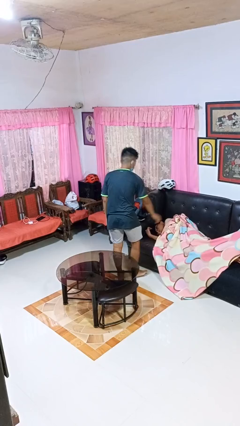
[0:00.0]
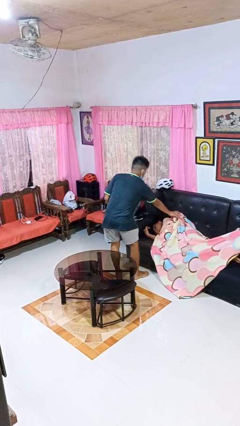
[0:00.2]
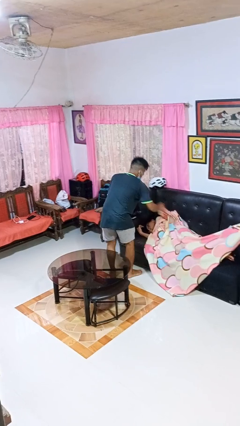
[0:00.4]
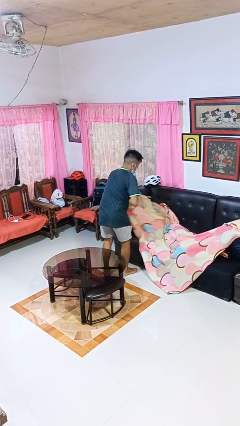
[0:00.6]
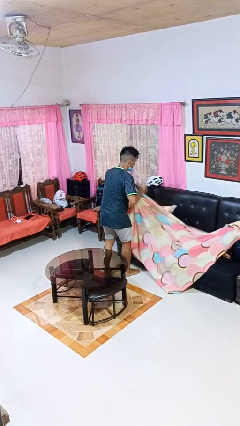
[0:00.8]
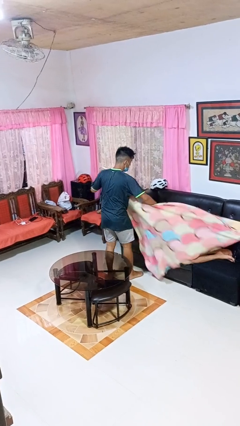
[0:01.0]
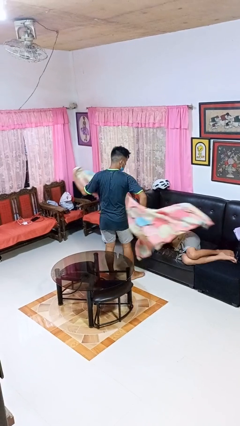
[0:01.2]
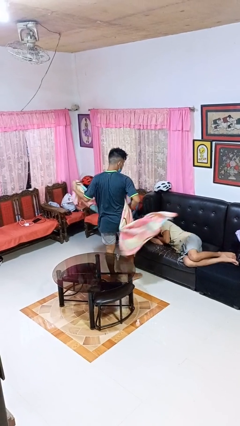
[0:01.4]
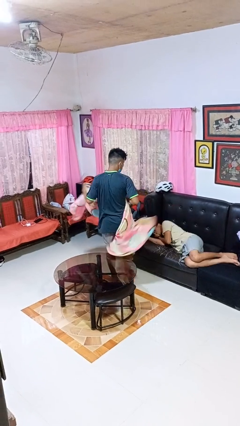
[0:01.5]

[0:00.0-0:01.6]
person uncovers friend with blanket

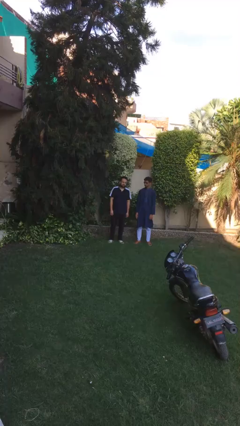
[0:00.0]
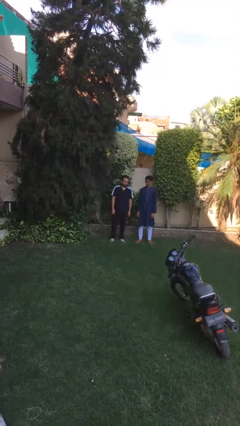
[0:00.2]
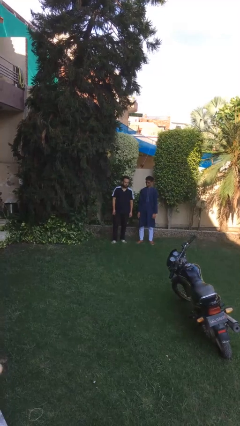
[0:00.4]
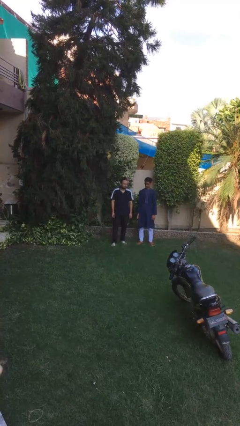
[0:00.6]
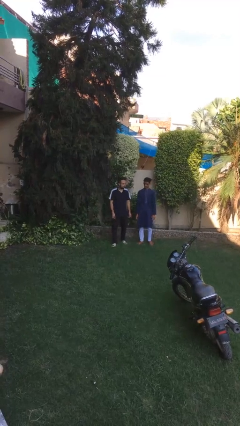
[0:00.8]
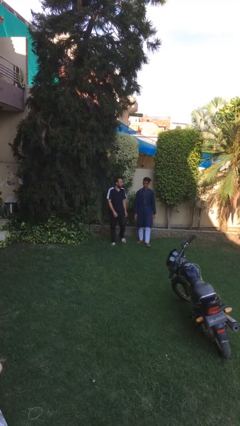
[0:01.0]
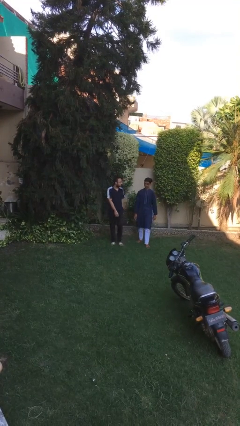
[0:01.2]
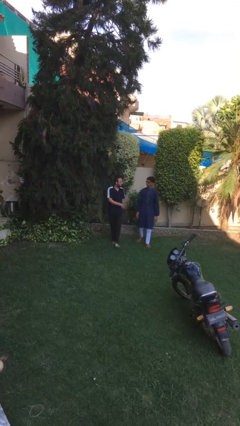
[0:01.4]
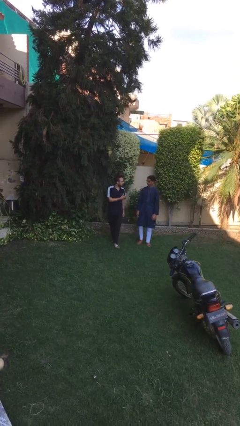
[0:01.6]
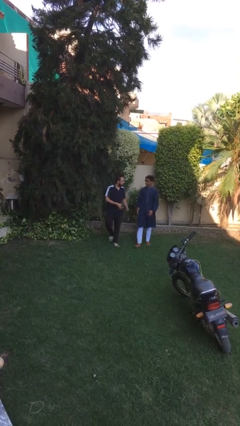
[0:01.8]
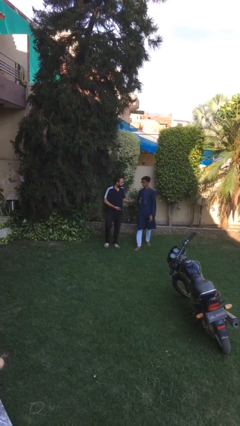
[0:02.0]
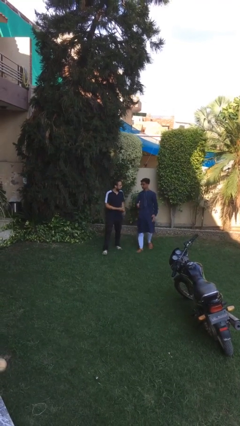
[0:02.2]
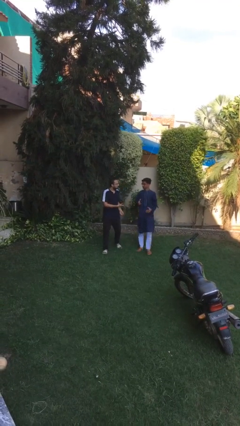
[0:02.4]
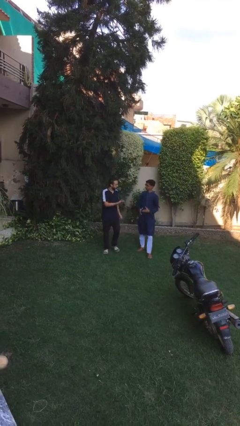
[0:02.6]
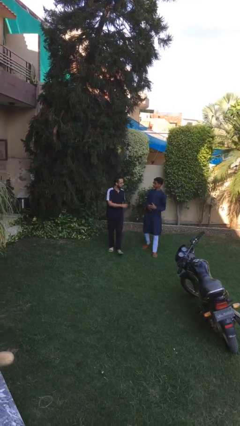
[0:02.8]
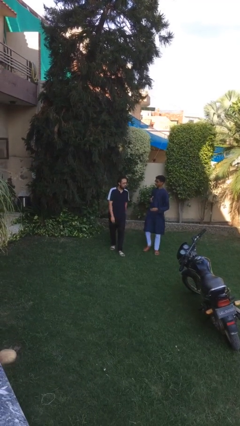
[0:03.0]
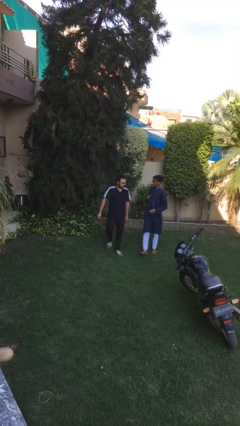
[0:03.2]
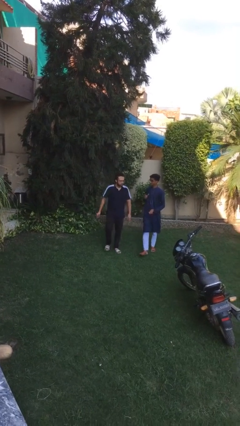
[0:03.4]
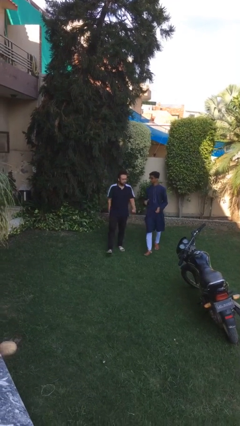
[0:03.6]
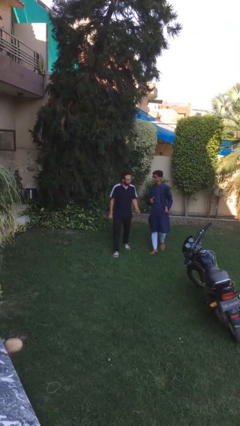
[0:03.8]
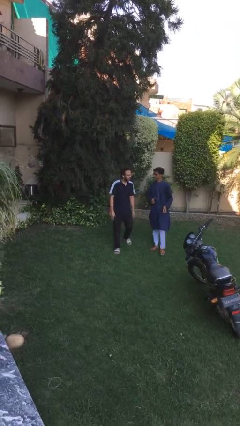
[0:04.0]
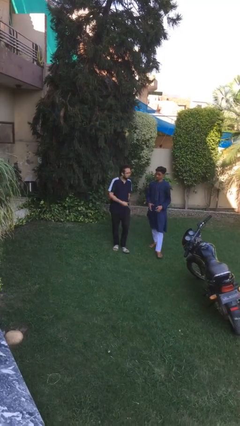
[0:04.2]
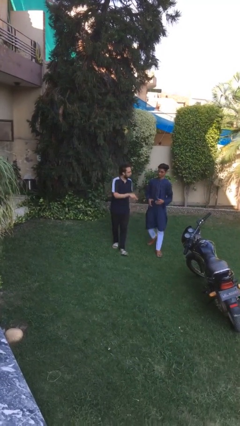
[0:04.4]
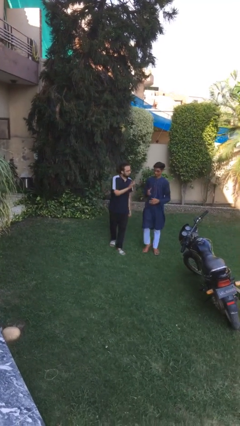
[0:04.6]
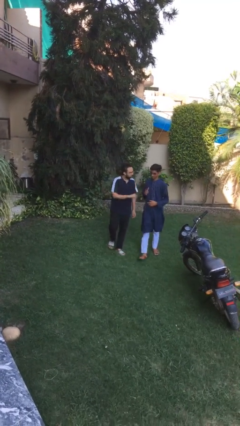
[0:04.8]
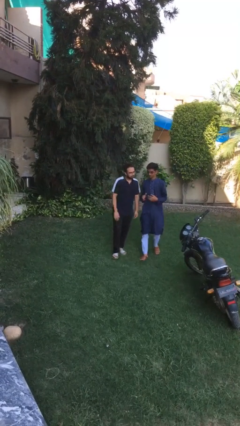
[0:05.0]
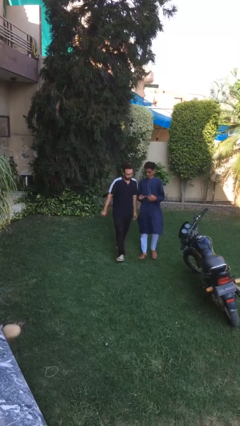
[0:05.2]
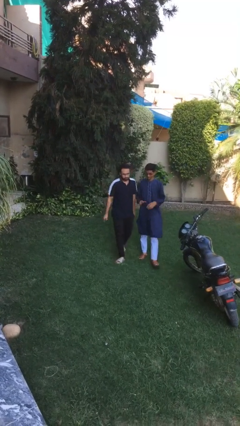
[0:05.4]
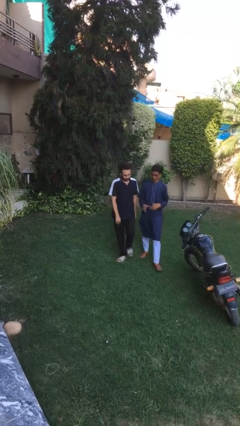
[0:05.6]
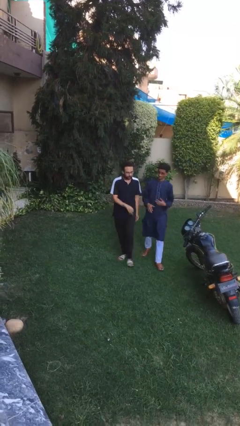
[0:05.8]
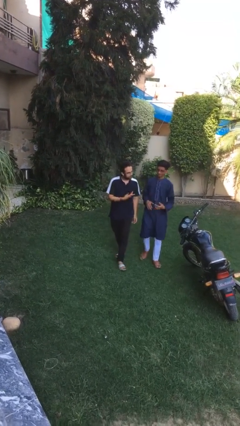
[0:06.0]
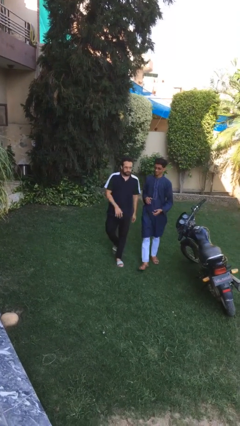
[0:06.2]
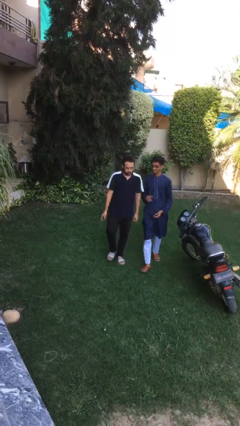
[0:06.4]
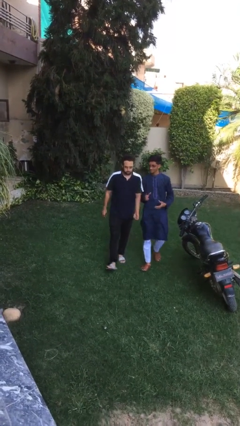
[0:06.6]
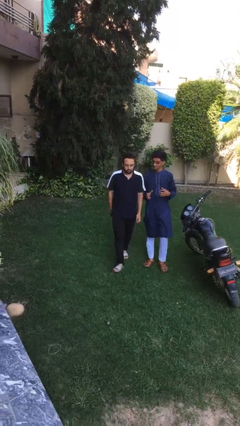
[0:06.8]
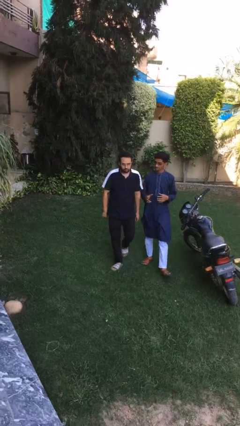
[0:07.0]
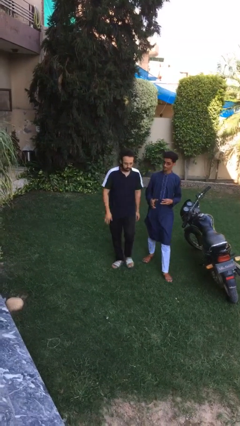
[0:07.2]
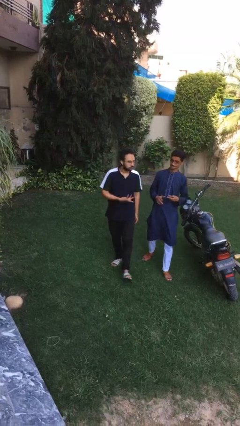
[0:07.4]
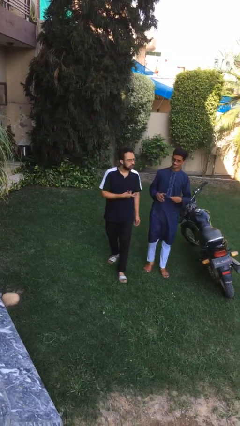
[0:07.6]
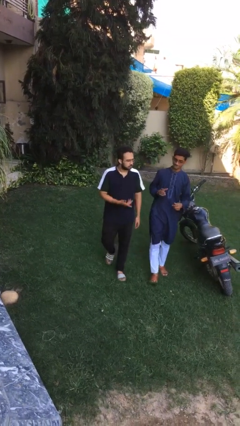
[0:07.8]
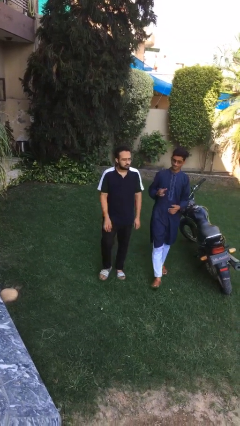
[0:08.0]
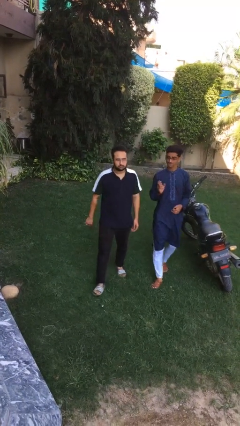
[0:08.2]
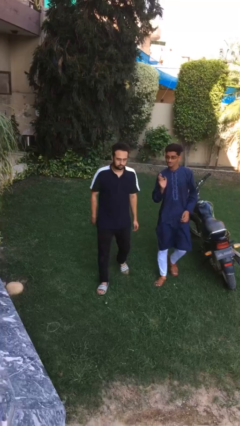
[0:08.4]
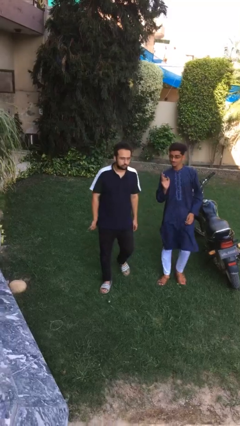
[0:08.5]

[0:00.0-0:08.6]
person talks to person

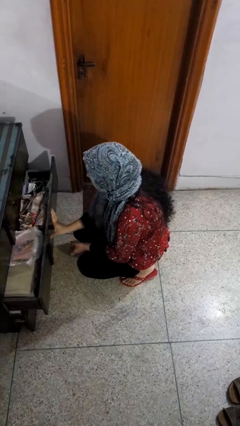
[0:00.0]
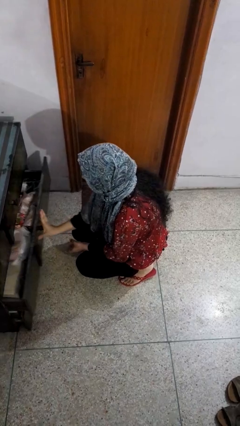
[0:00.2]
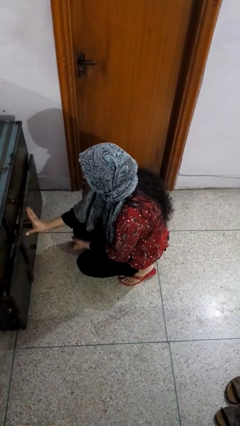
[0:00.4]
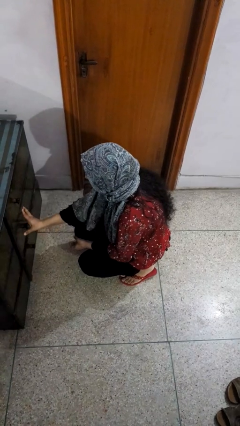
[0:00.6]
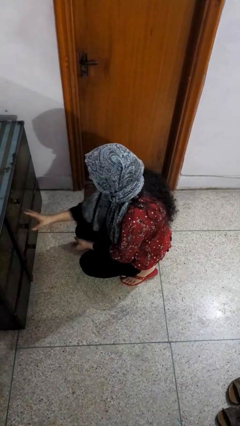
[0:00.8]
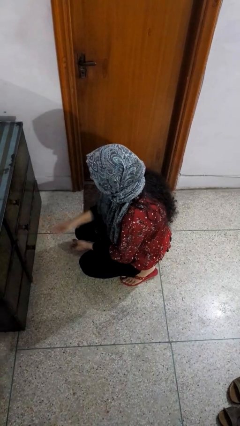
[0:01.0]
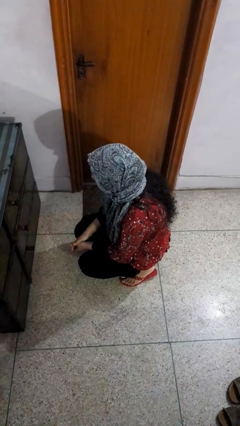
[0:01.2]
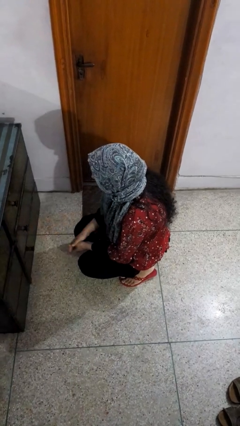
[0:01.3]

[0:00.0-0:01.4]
person closes dresser drawer

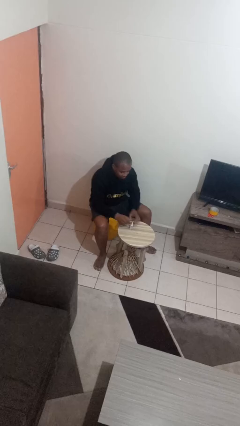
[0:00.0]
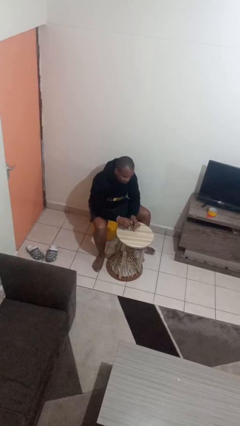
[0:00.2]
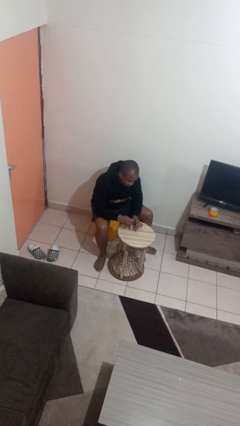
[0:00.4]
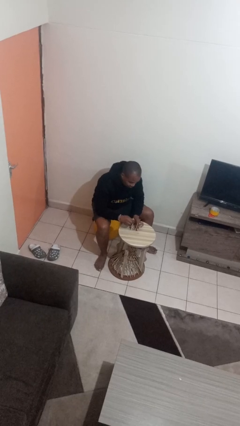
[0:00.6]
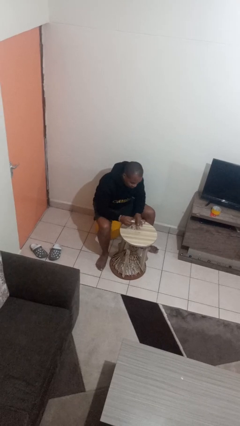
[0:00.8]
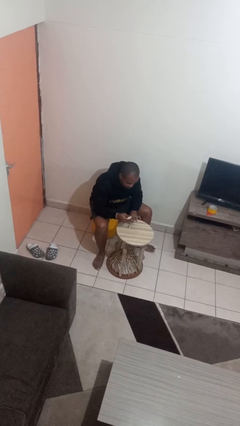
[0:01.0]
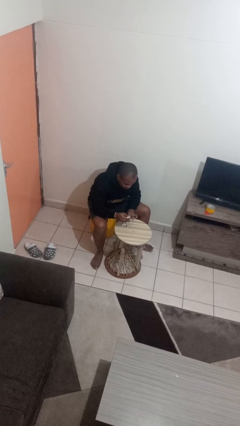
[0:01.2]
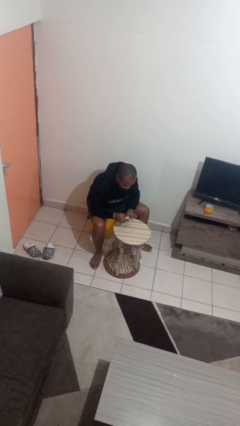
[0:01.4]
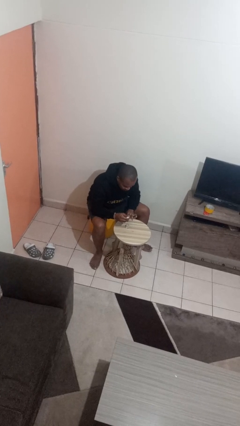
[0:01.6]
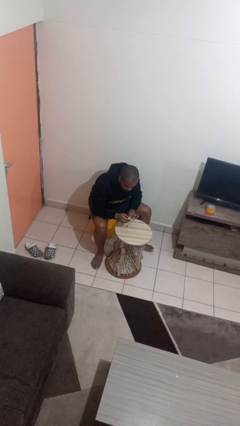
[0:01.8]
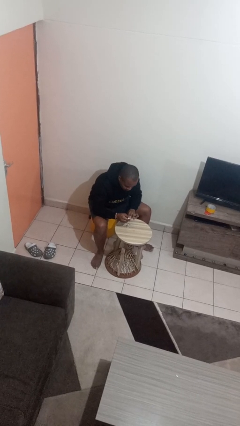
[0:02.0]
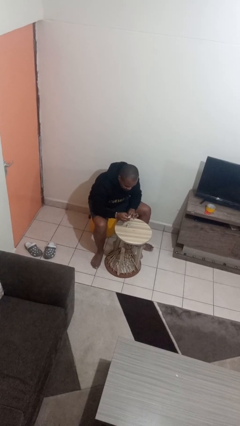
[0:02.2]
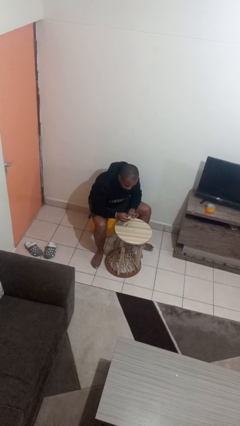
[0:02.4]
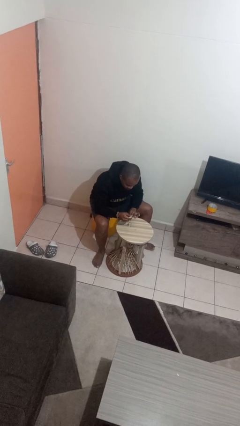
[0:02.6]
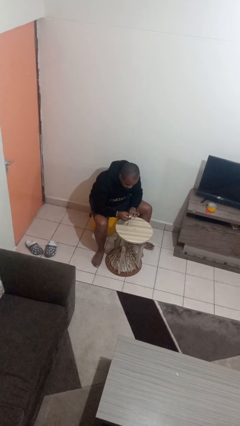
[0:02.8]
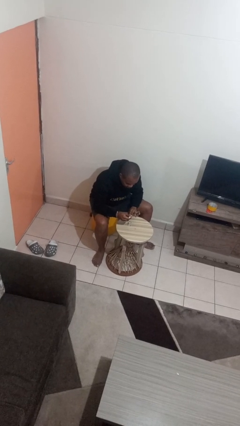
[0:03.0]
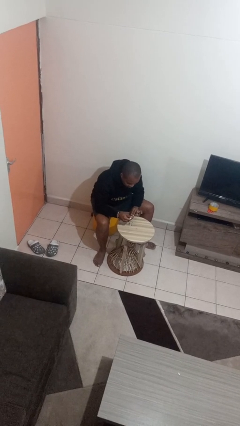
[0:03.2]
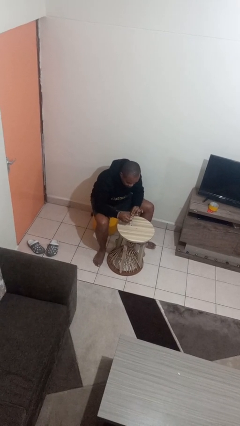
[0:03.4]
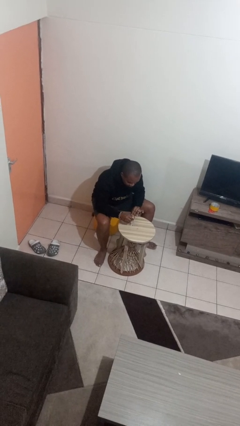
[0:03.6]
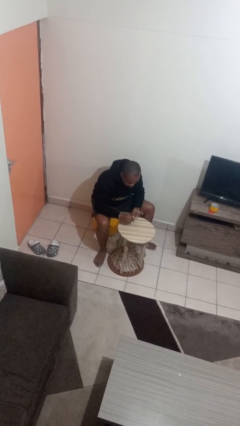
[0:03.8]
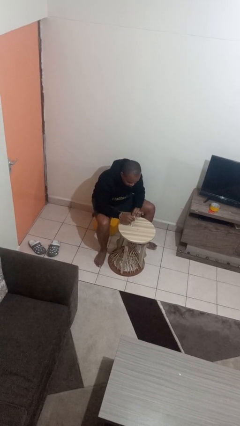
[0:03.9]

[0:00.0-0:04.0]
person paints fingernails

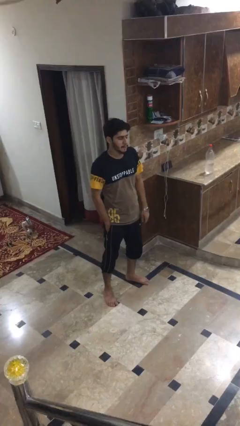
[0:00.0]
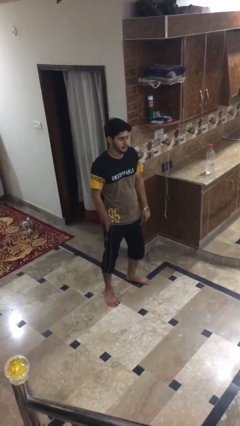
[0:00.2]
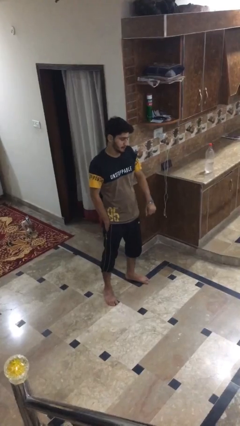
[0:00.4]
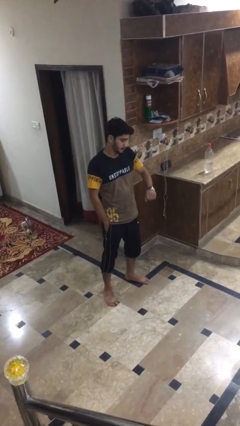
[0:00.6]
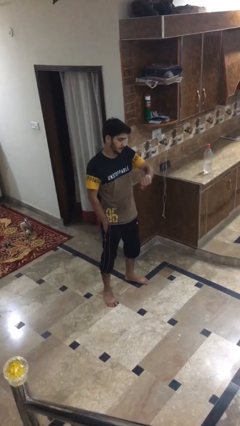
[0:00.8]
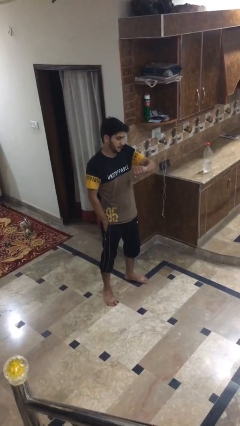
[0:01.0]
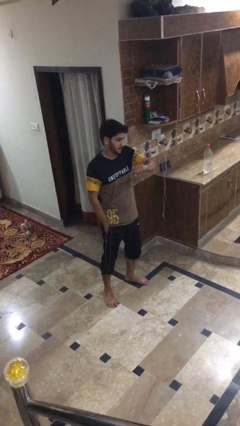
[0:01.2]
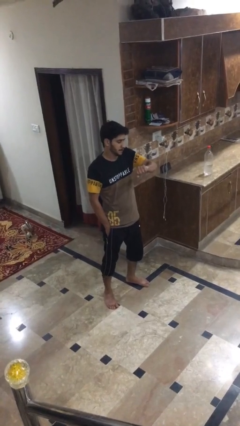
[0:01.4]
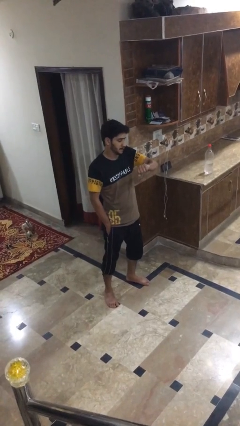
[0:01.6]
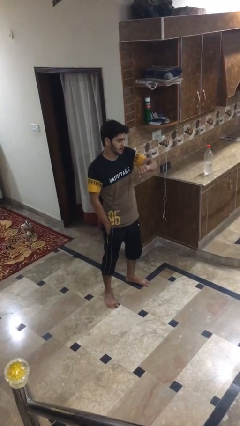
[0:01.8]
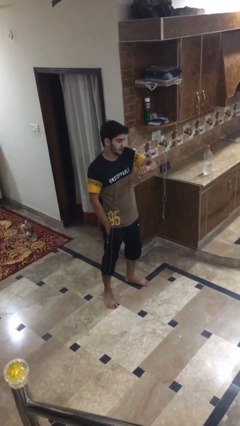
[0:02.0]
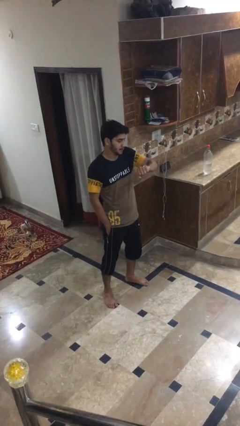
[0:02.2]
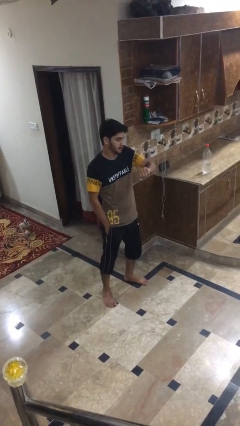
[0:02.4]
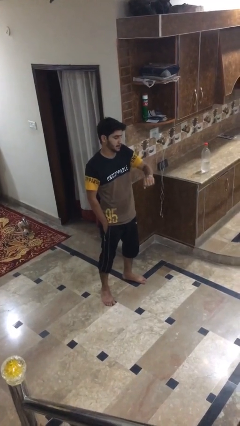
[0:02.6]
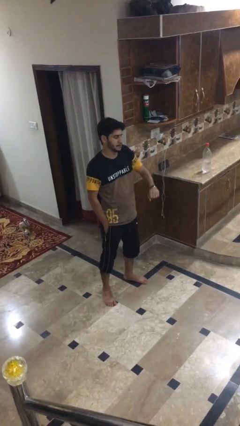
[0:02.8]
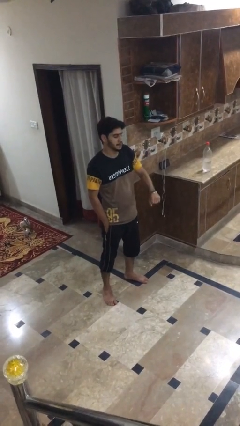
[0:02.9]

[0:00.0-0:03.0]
person looks at wristwatch
